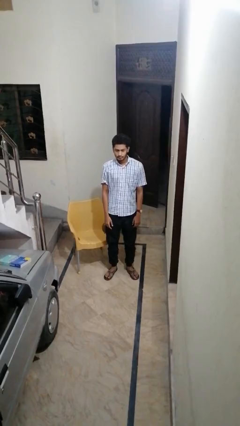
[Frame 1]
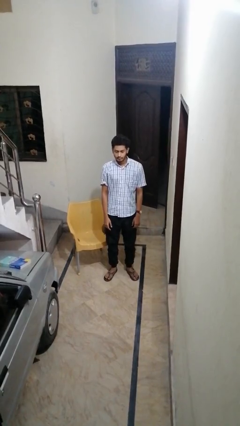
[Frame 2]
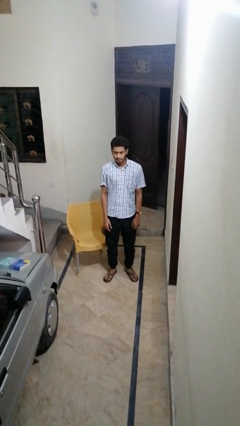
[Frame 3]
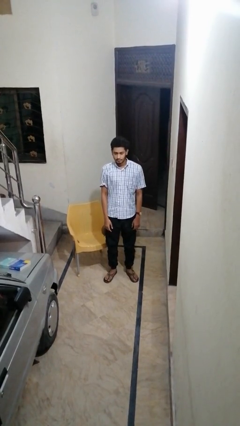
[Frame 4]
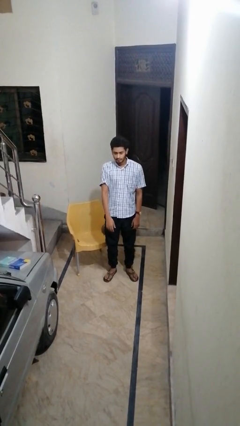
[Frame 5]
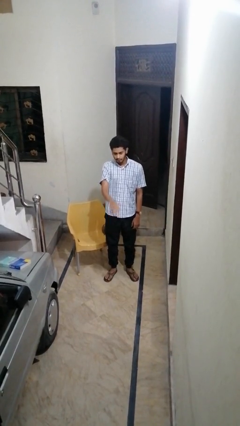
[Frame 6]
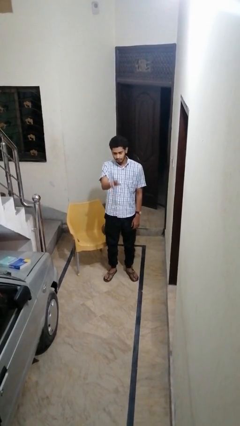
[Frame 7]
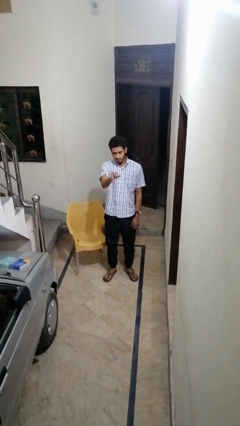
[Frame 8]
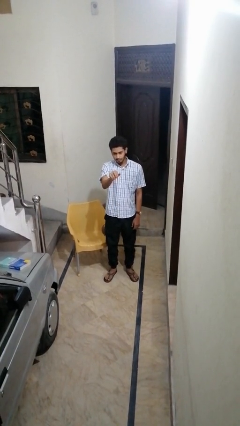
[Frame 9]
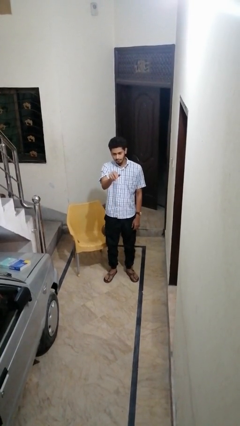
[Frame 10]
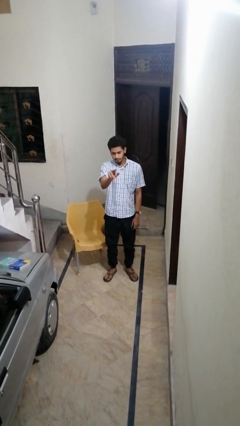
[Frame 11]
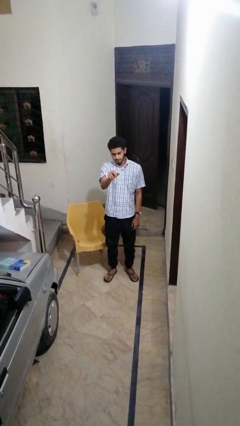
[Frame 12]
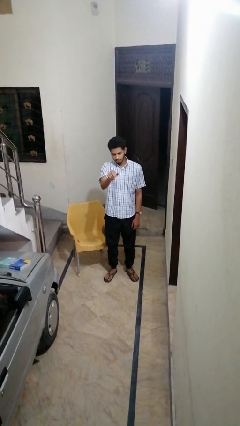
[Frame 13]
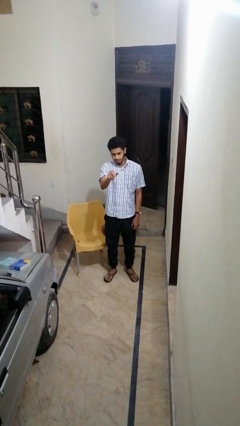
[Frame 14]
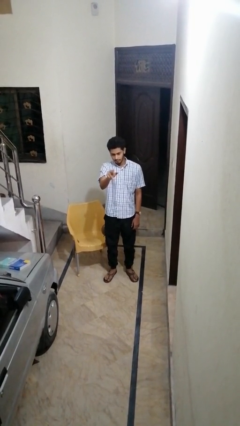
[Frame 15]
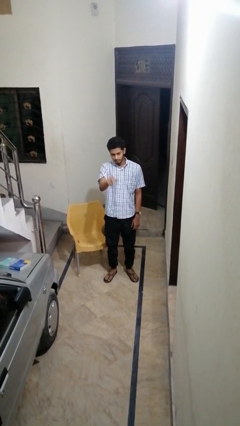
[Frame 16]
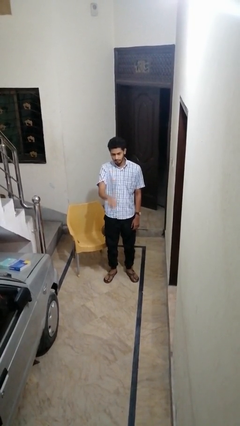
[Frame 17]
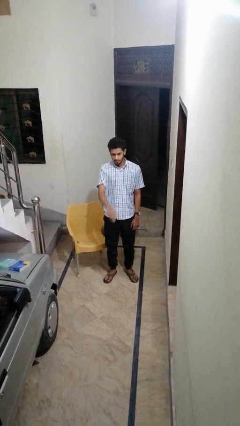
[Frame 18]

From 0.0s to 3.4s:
person gestures come here

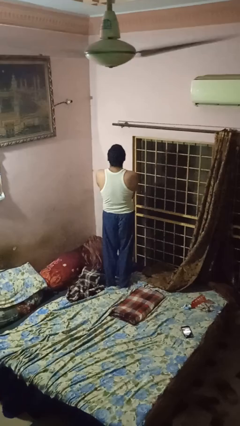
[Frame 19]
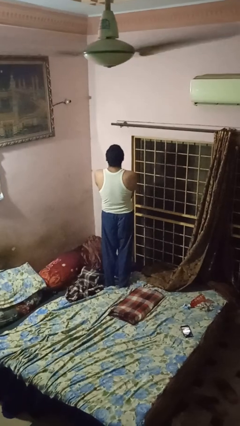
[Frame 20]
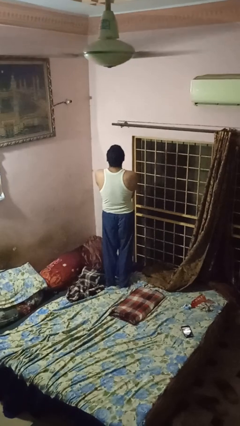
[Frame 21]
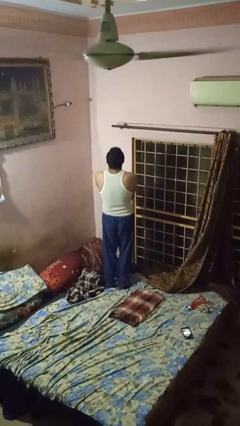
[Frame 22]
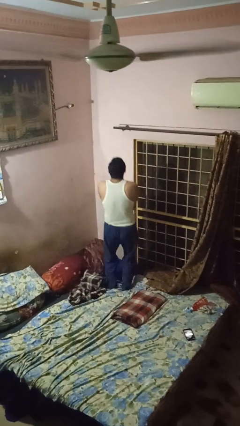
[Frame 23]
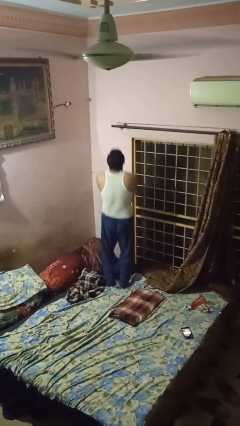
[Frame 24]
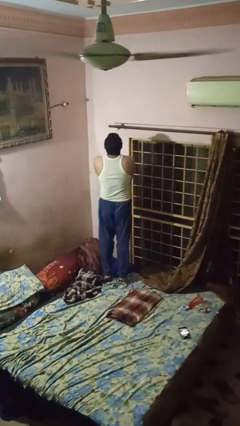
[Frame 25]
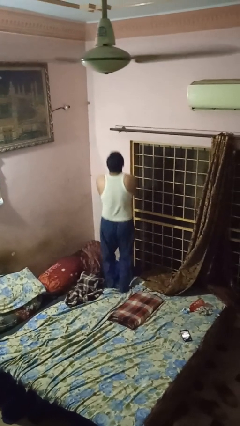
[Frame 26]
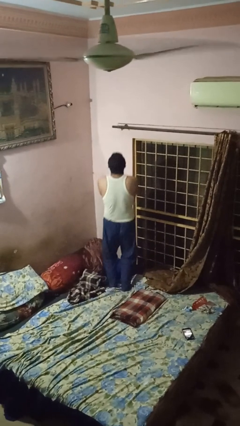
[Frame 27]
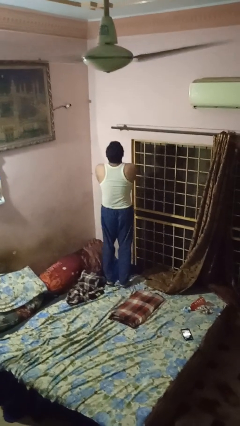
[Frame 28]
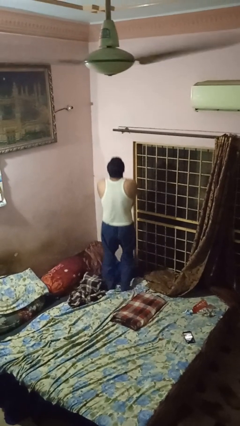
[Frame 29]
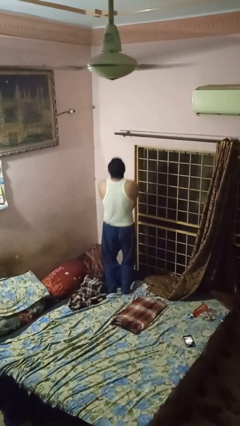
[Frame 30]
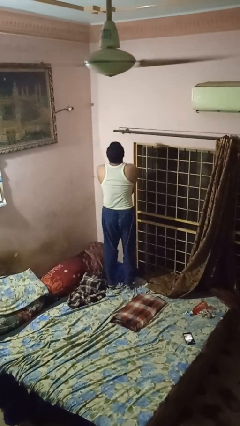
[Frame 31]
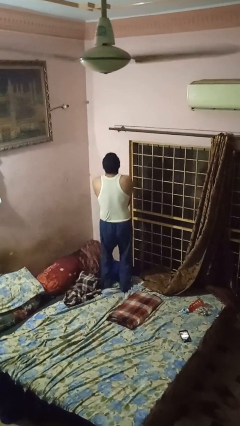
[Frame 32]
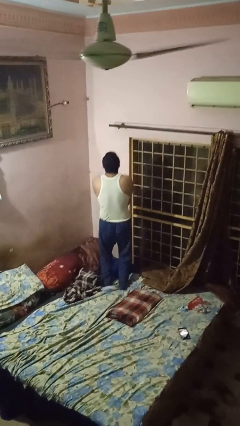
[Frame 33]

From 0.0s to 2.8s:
person jumps on bed

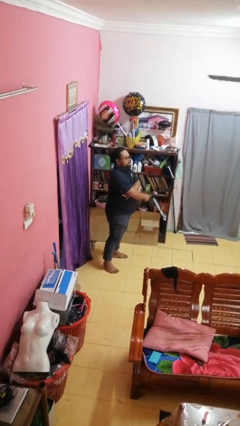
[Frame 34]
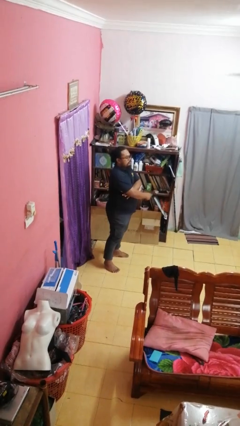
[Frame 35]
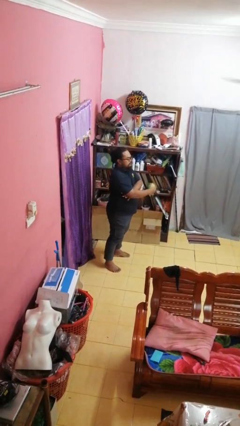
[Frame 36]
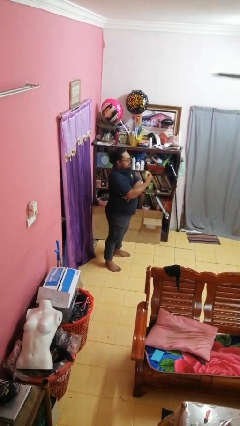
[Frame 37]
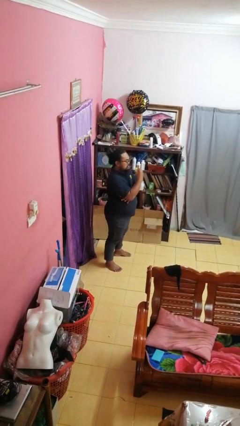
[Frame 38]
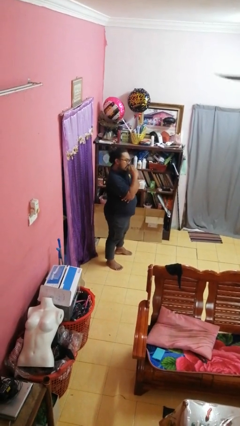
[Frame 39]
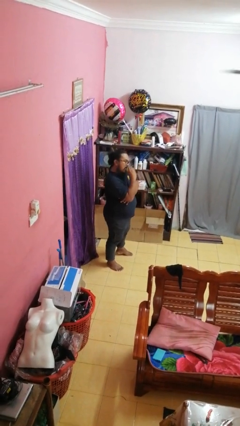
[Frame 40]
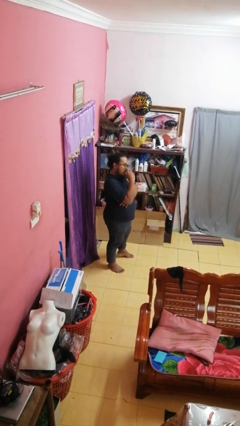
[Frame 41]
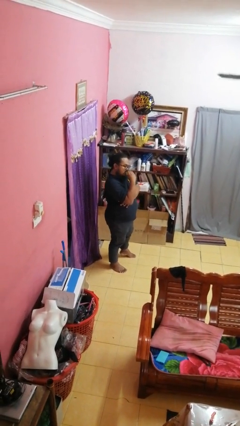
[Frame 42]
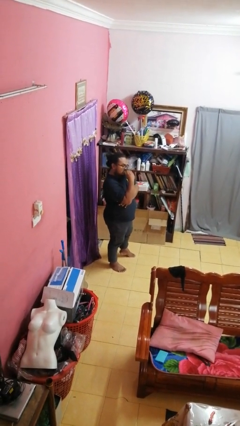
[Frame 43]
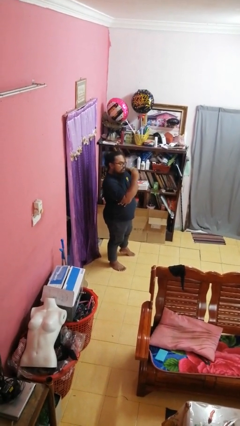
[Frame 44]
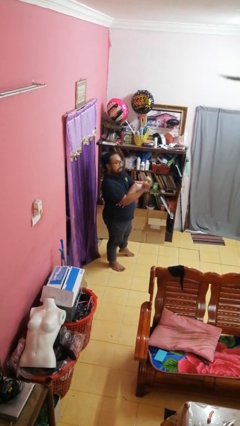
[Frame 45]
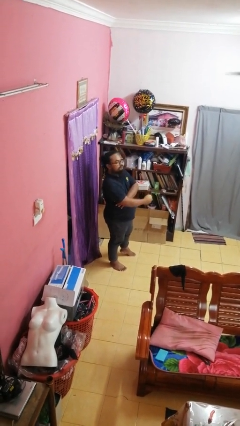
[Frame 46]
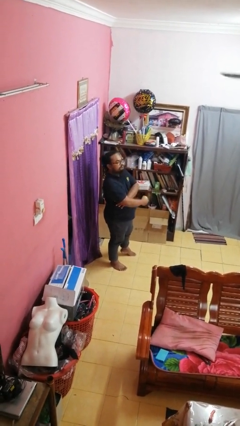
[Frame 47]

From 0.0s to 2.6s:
person eats apple

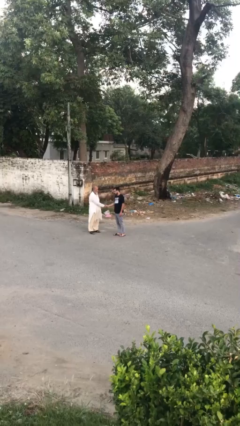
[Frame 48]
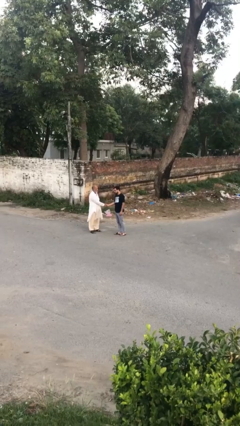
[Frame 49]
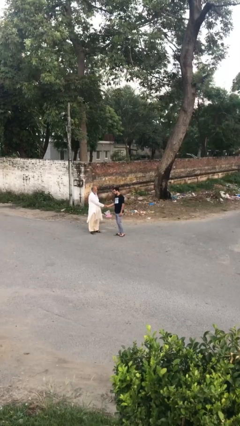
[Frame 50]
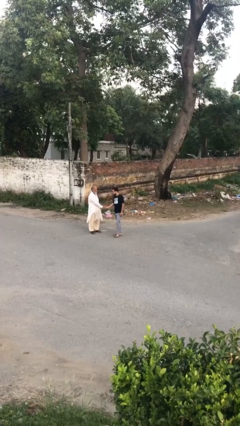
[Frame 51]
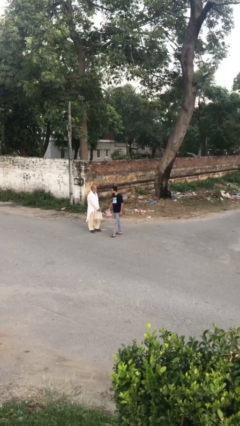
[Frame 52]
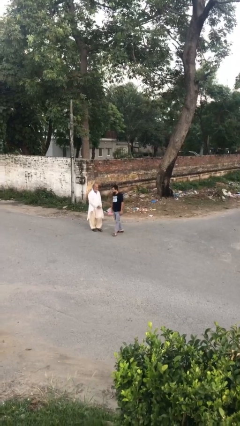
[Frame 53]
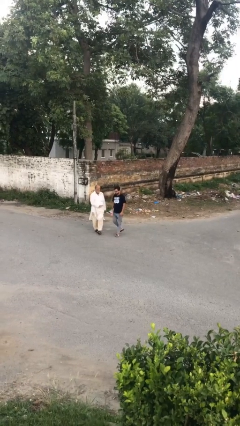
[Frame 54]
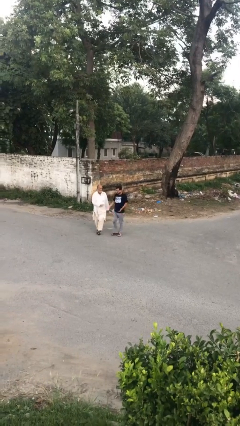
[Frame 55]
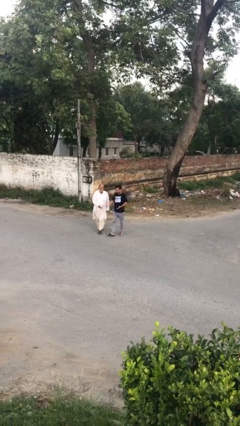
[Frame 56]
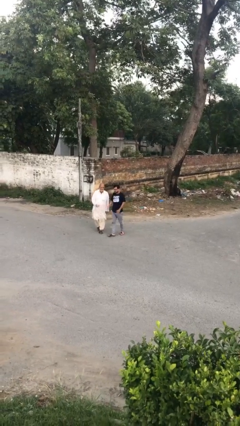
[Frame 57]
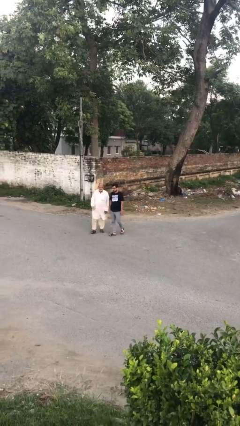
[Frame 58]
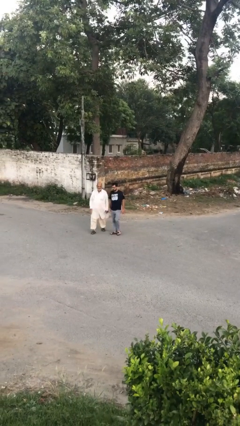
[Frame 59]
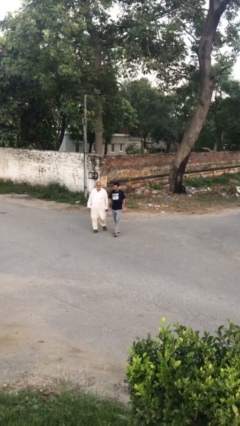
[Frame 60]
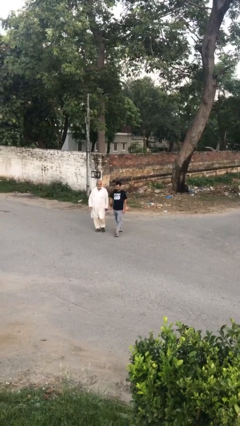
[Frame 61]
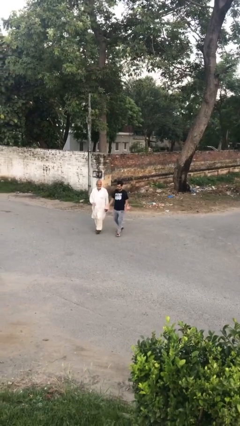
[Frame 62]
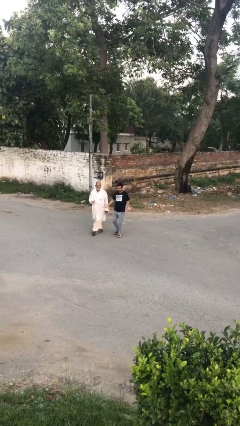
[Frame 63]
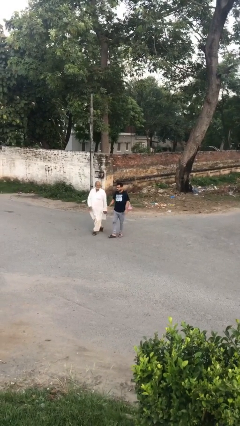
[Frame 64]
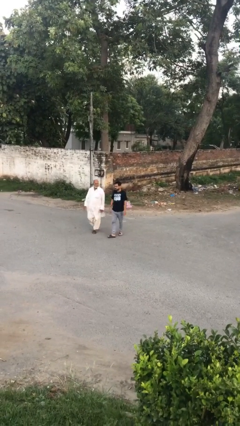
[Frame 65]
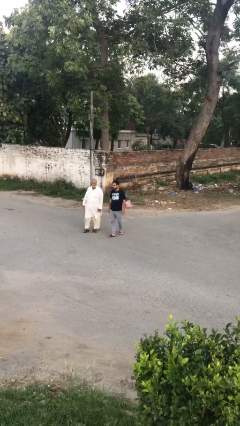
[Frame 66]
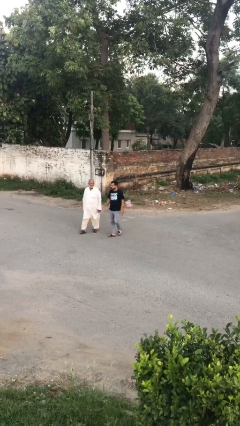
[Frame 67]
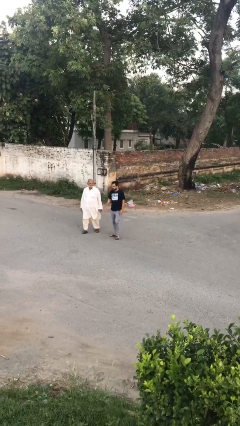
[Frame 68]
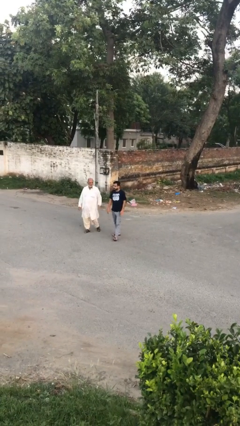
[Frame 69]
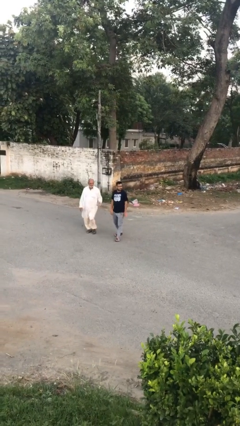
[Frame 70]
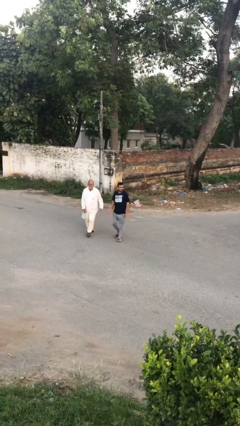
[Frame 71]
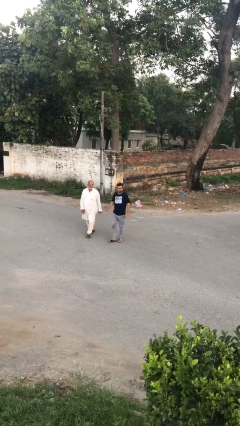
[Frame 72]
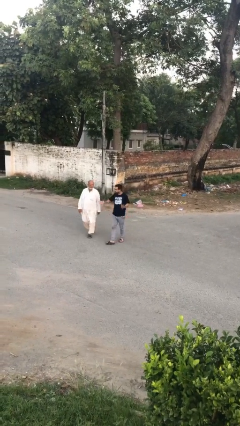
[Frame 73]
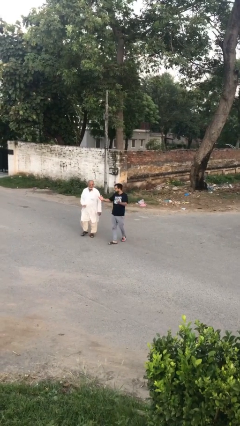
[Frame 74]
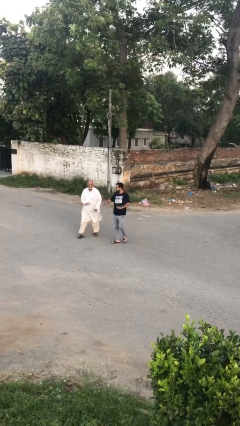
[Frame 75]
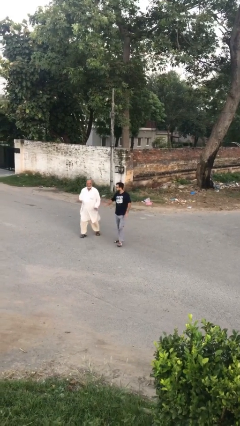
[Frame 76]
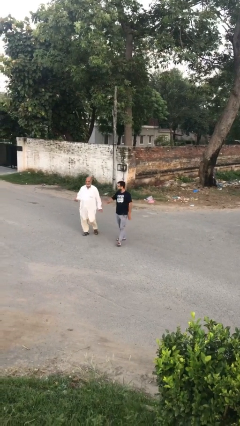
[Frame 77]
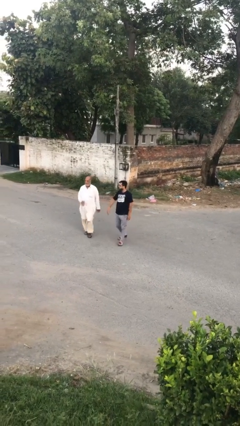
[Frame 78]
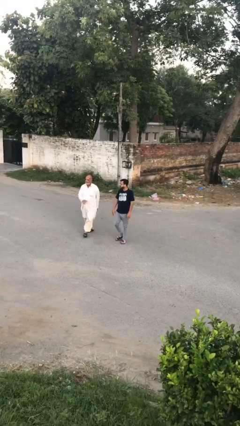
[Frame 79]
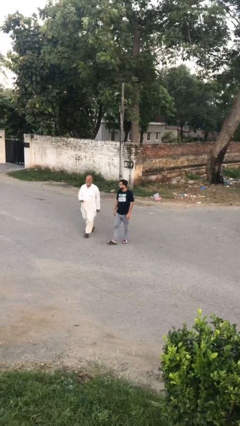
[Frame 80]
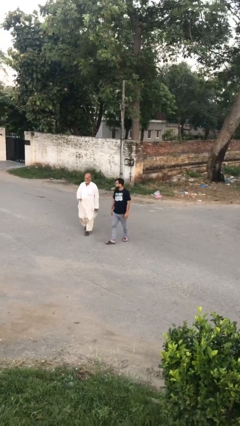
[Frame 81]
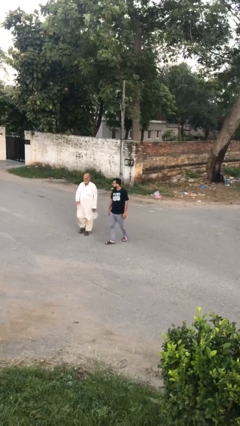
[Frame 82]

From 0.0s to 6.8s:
person talks to person

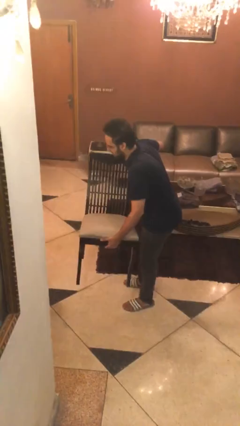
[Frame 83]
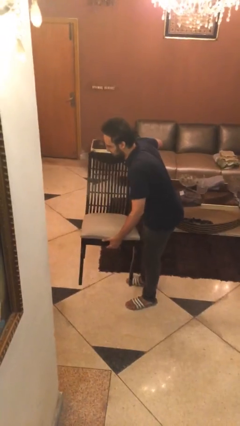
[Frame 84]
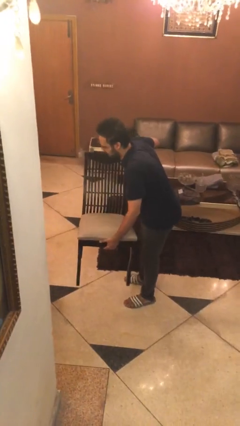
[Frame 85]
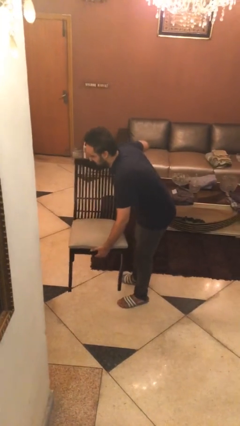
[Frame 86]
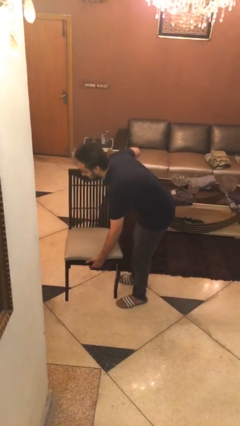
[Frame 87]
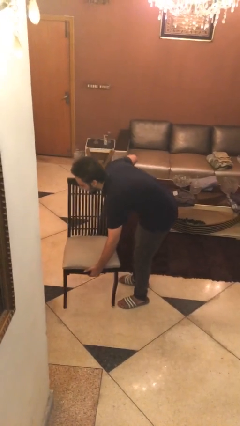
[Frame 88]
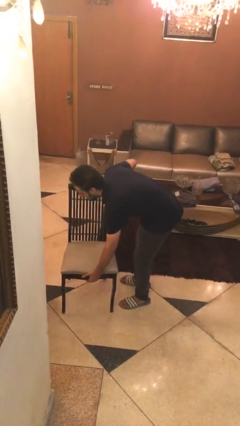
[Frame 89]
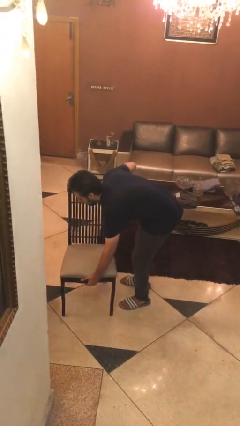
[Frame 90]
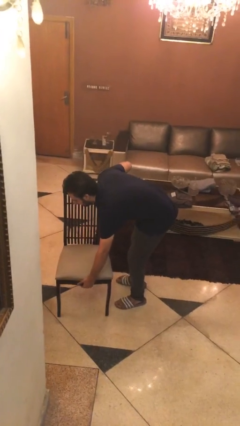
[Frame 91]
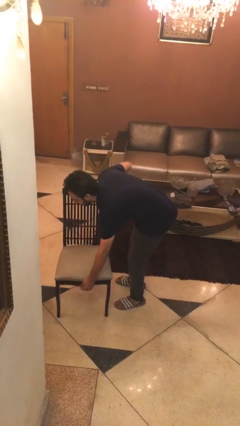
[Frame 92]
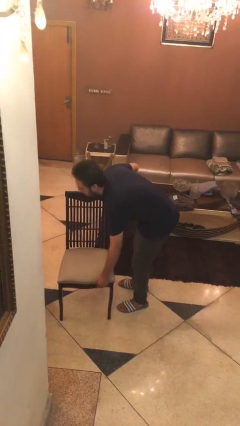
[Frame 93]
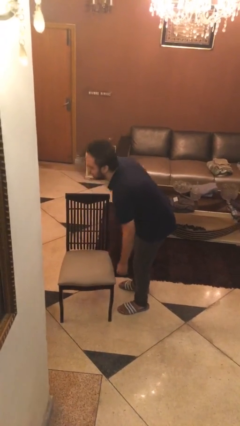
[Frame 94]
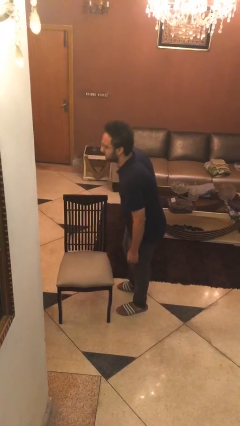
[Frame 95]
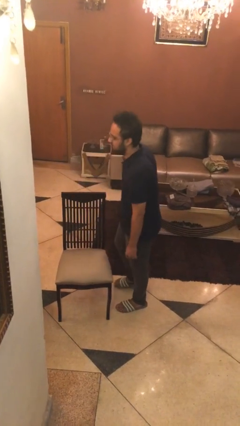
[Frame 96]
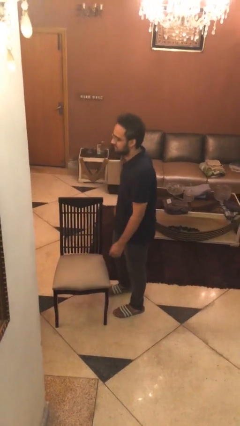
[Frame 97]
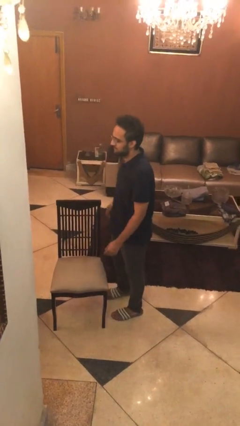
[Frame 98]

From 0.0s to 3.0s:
person puts down object on floor
